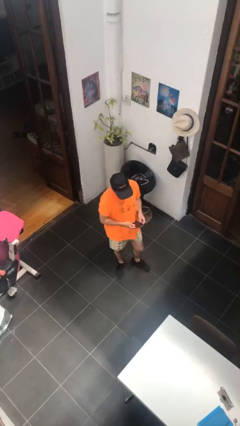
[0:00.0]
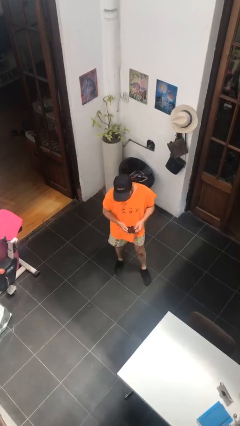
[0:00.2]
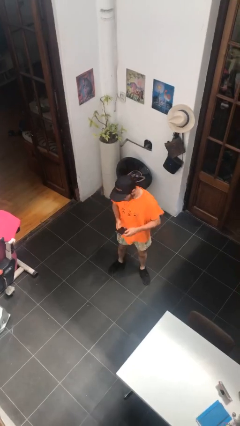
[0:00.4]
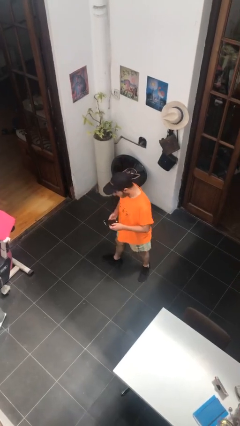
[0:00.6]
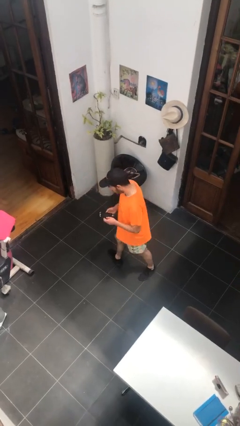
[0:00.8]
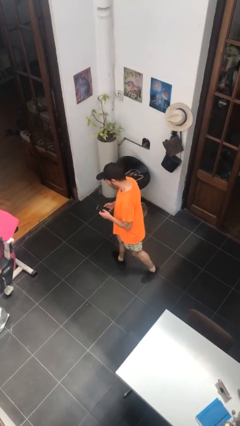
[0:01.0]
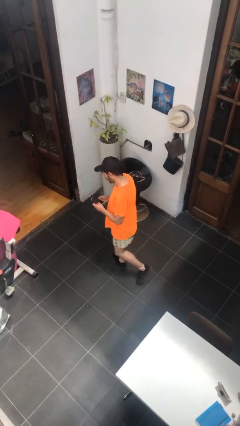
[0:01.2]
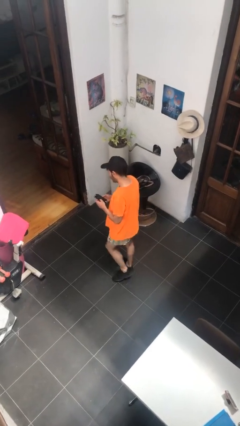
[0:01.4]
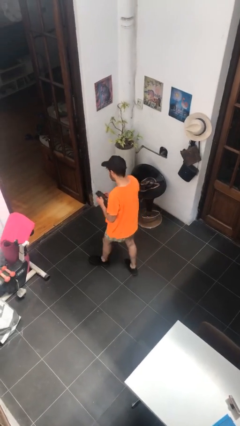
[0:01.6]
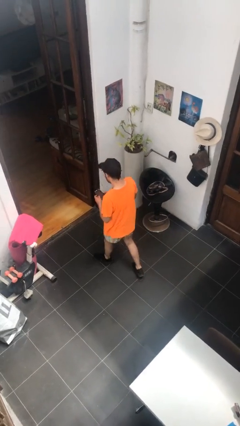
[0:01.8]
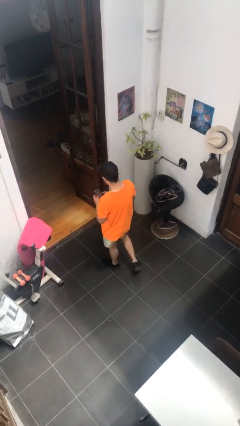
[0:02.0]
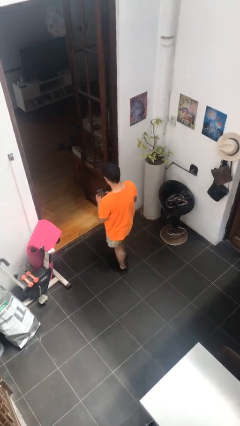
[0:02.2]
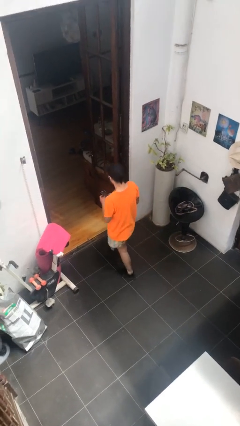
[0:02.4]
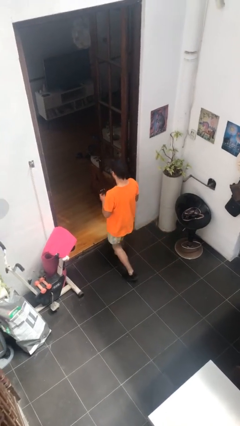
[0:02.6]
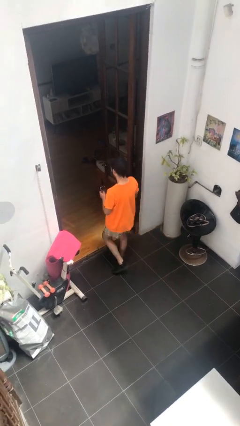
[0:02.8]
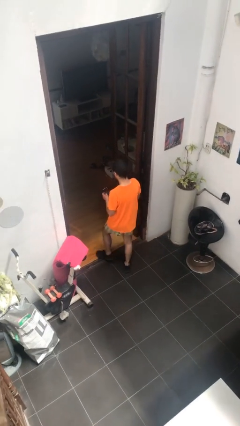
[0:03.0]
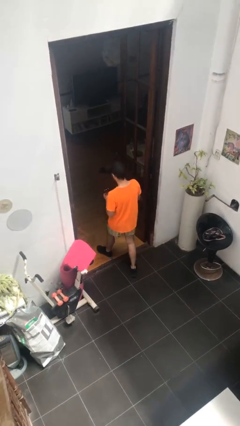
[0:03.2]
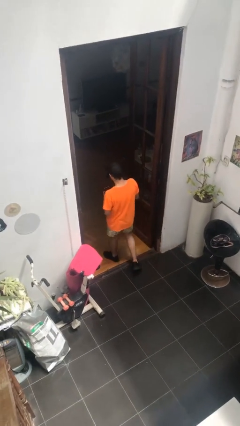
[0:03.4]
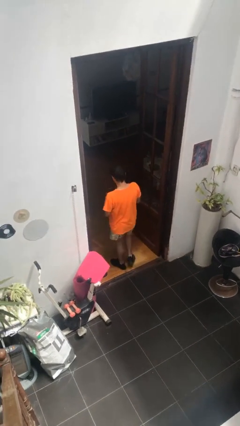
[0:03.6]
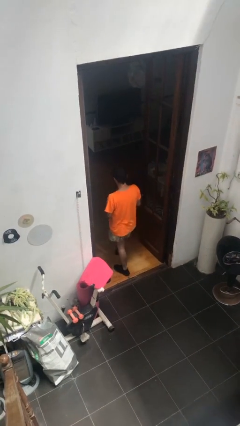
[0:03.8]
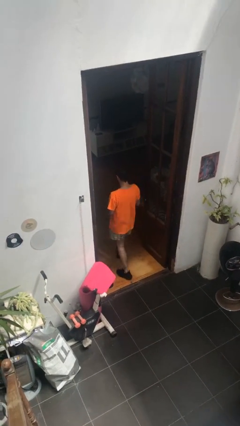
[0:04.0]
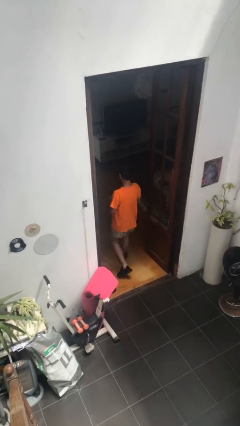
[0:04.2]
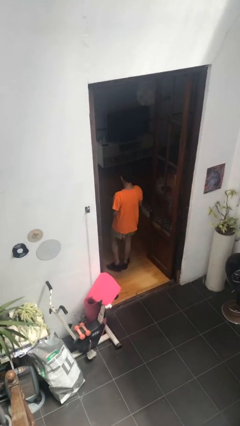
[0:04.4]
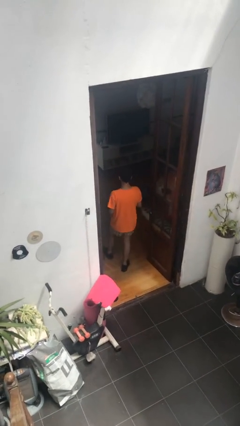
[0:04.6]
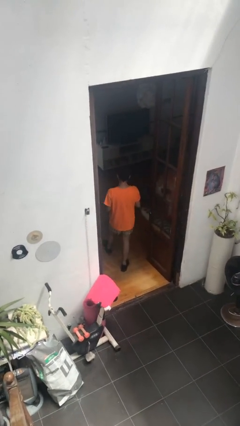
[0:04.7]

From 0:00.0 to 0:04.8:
person exits scene through structure

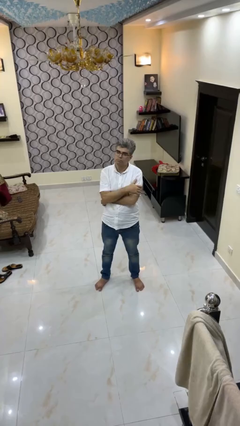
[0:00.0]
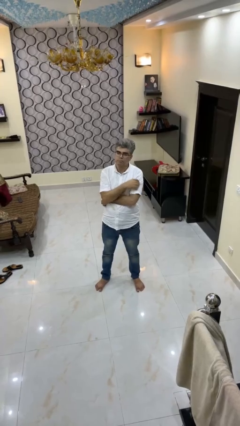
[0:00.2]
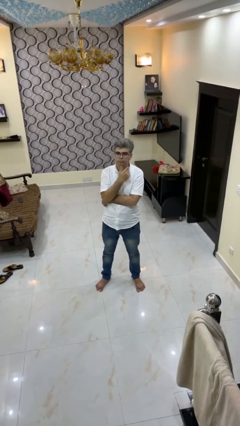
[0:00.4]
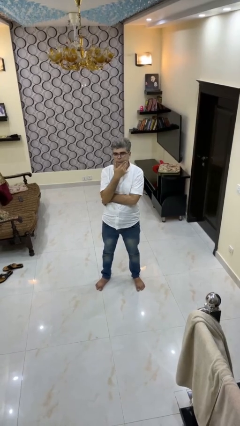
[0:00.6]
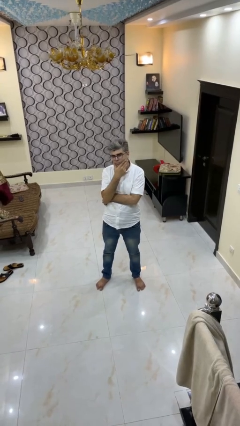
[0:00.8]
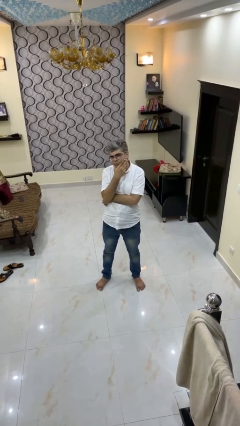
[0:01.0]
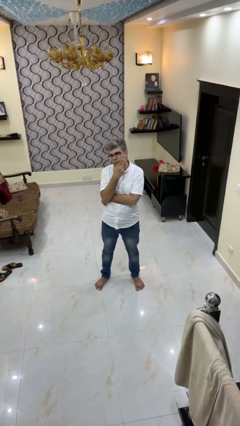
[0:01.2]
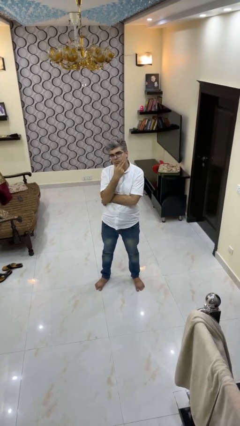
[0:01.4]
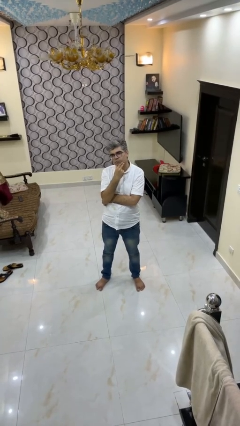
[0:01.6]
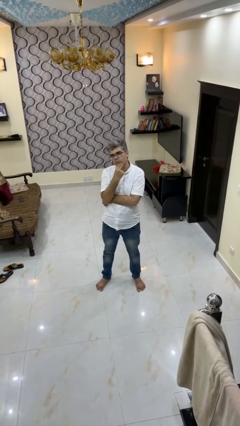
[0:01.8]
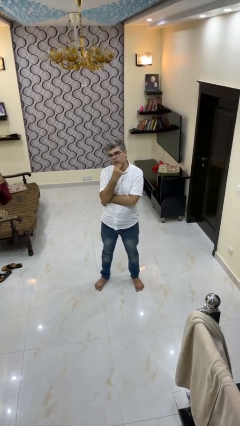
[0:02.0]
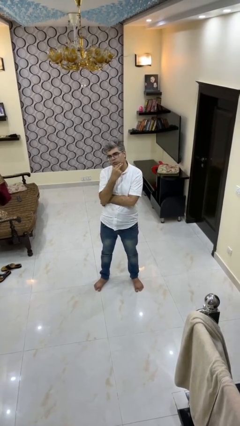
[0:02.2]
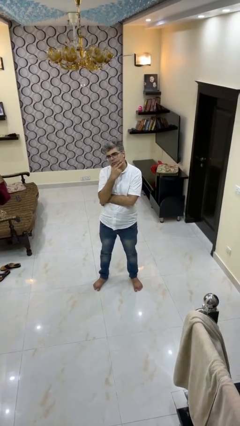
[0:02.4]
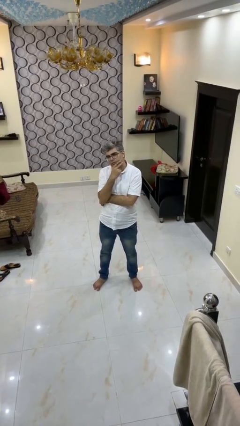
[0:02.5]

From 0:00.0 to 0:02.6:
person strokes chin

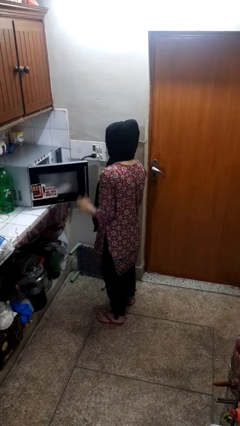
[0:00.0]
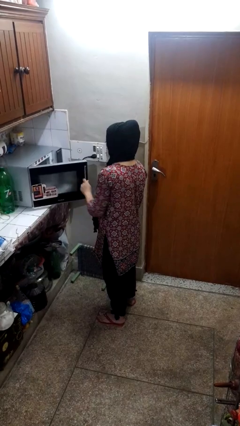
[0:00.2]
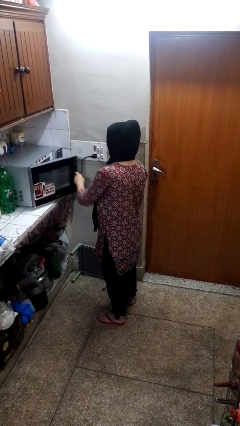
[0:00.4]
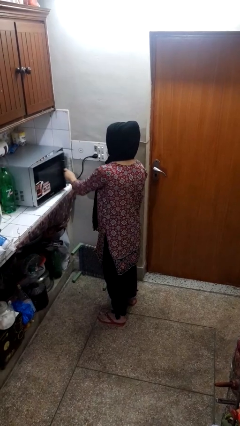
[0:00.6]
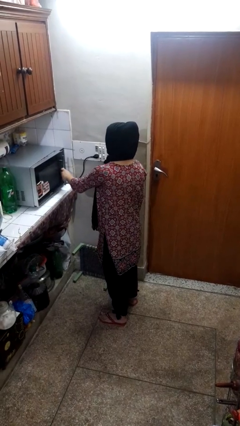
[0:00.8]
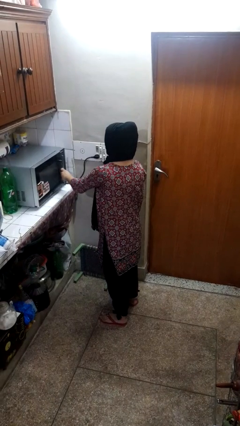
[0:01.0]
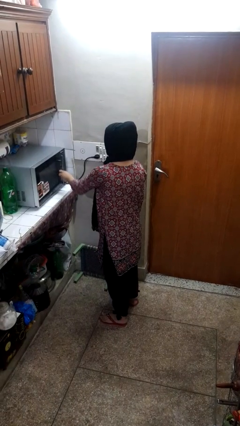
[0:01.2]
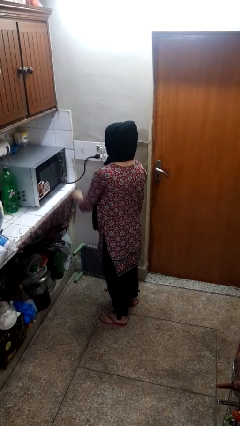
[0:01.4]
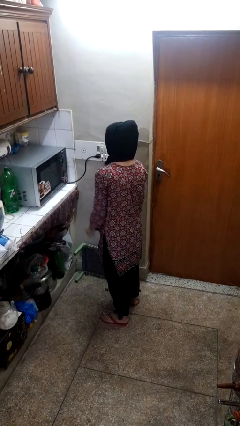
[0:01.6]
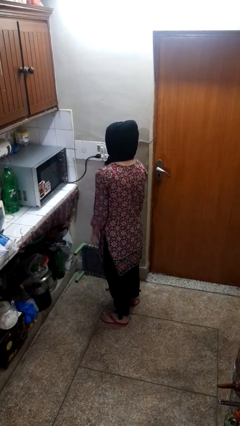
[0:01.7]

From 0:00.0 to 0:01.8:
person closes oven door

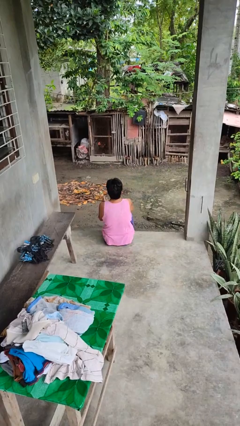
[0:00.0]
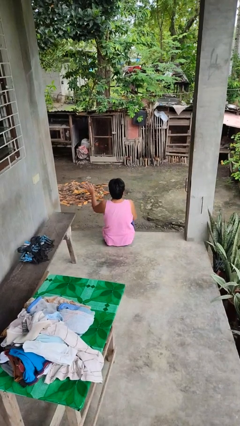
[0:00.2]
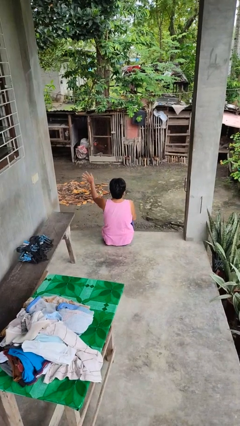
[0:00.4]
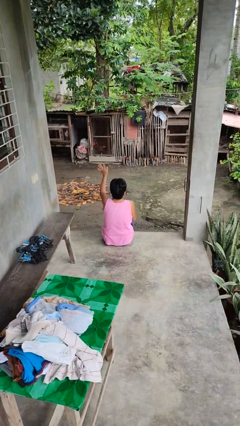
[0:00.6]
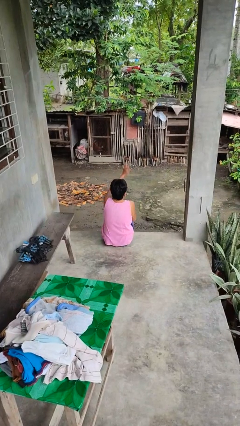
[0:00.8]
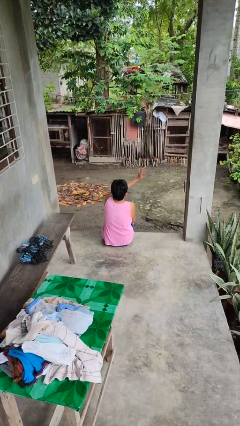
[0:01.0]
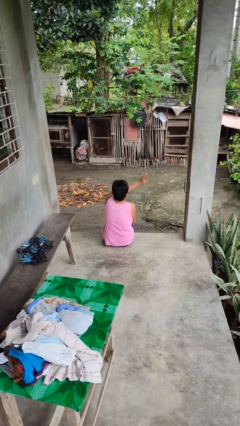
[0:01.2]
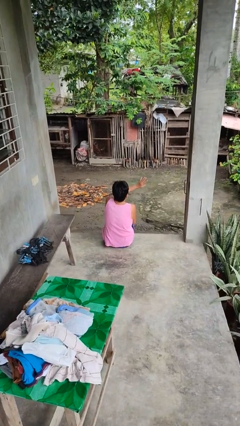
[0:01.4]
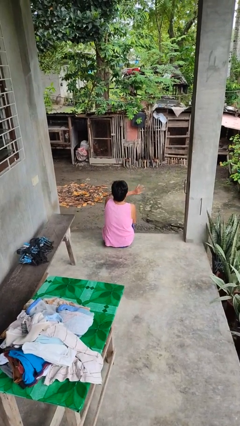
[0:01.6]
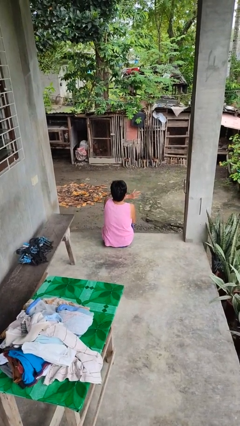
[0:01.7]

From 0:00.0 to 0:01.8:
person gestures swipe right

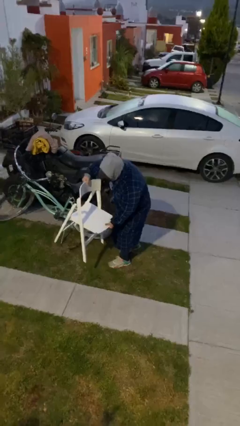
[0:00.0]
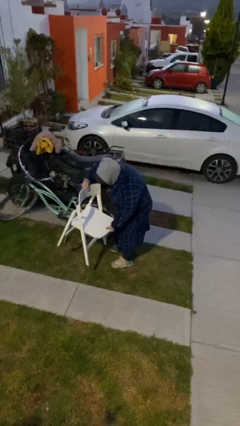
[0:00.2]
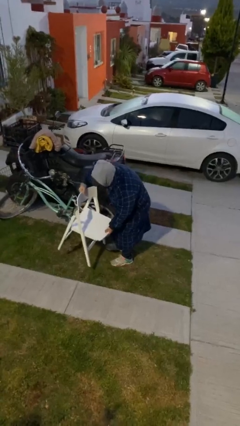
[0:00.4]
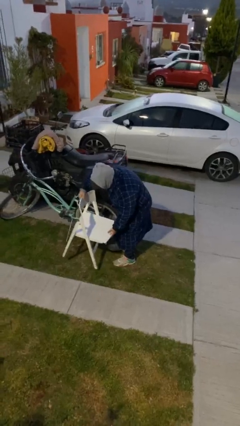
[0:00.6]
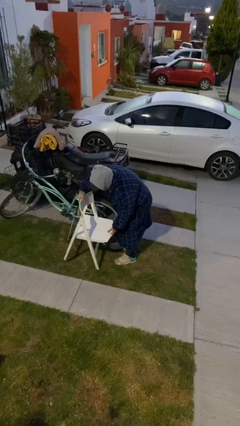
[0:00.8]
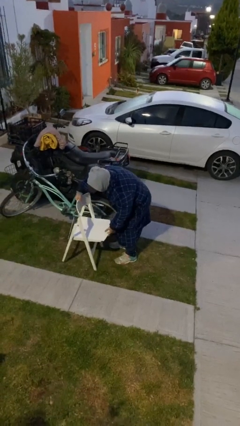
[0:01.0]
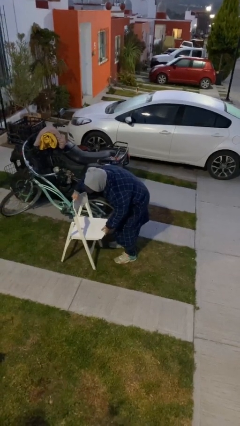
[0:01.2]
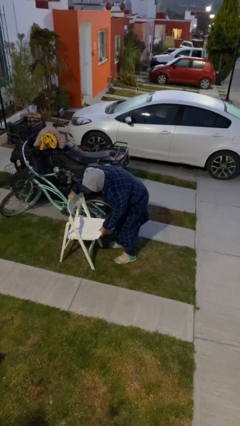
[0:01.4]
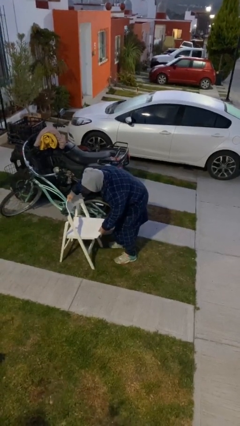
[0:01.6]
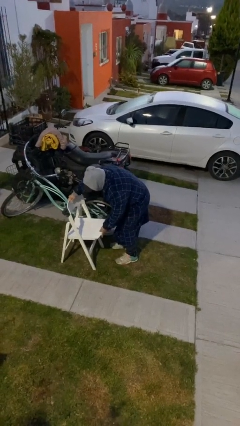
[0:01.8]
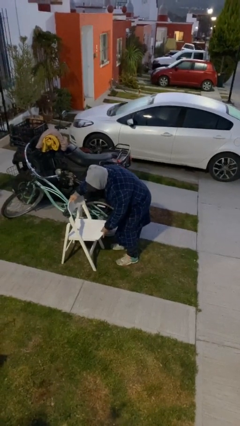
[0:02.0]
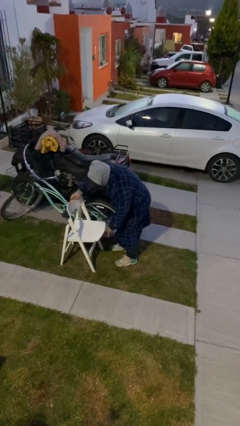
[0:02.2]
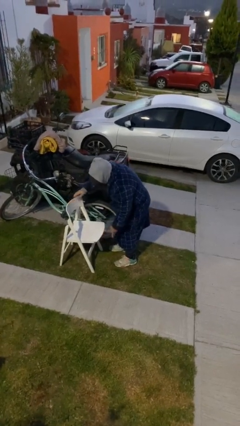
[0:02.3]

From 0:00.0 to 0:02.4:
person puts down object on floor

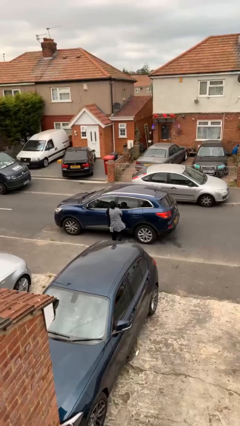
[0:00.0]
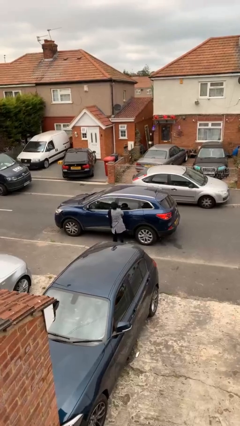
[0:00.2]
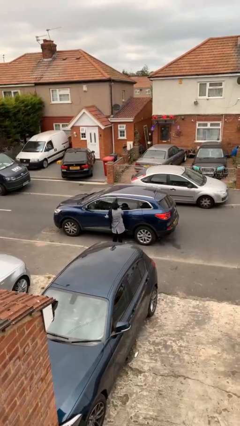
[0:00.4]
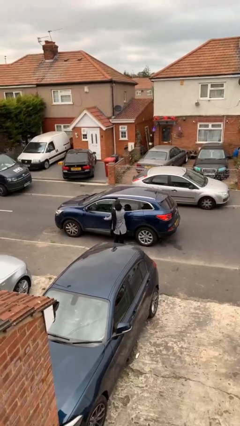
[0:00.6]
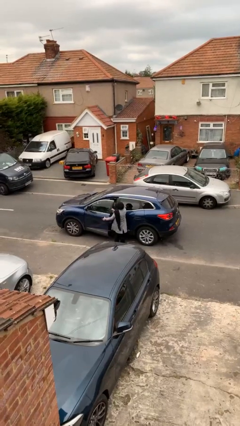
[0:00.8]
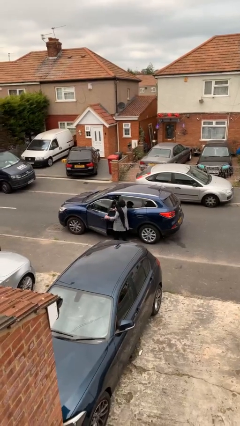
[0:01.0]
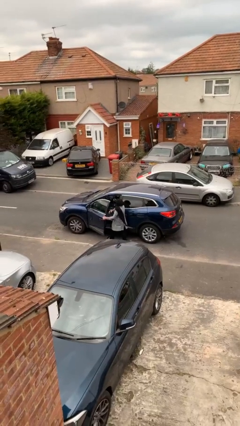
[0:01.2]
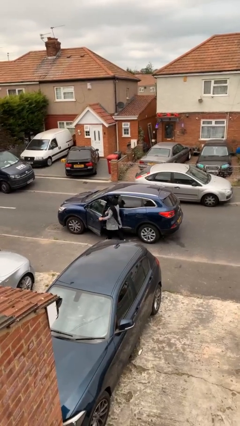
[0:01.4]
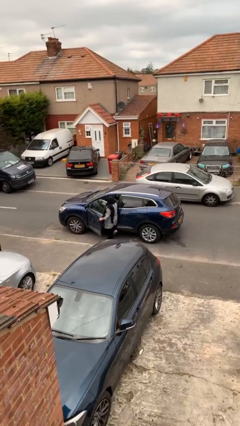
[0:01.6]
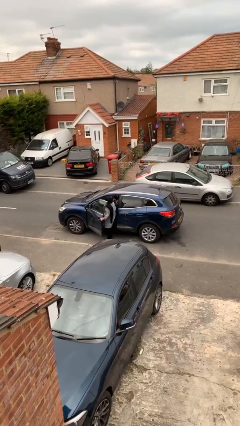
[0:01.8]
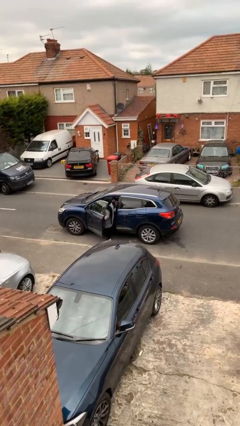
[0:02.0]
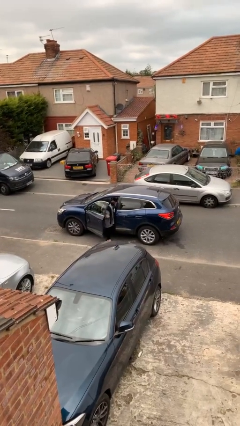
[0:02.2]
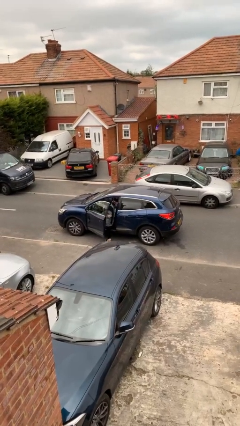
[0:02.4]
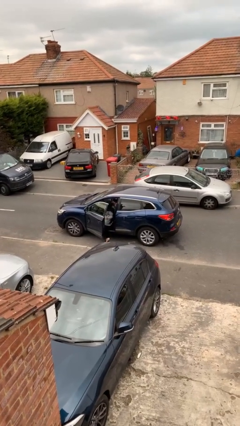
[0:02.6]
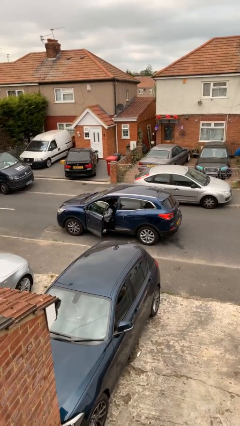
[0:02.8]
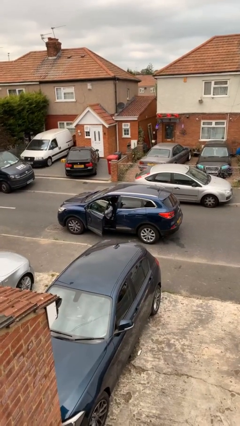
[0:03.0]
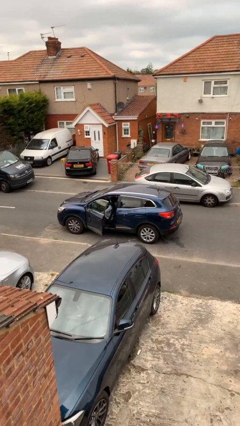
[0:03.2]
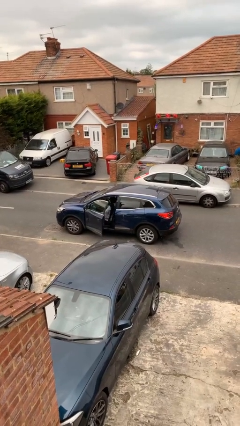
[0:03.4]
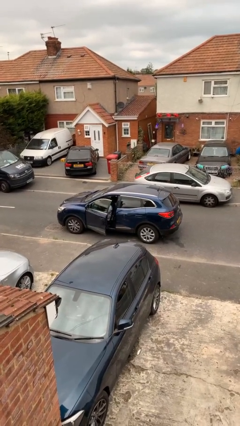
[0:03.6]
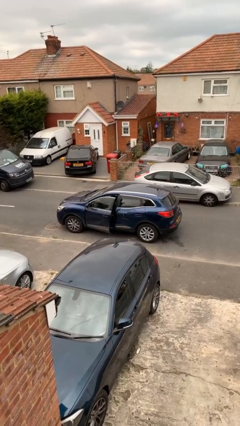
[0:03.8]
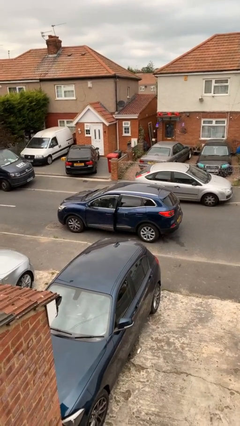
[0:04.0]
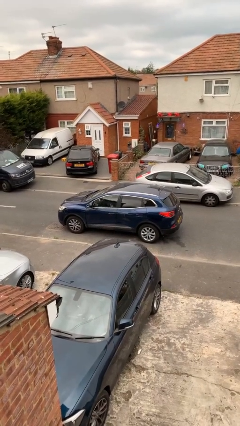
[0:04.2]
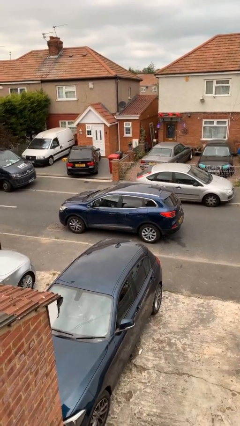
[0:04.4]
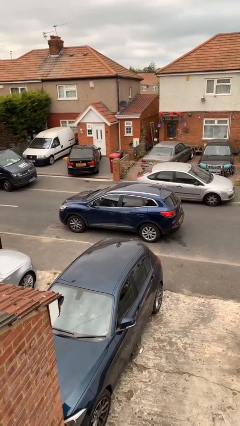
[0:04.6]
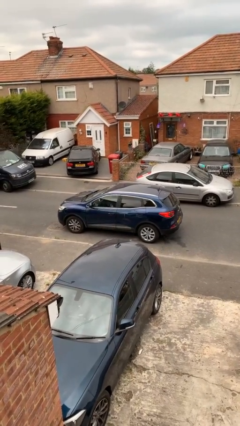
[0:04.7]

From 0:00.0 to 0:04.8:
car picks up person
